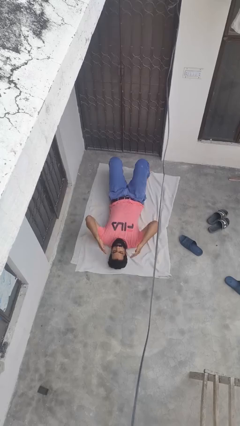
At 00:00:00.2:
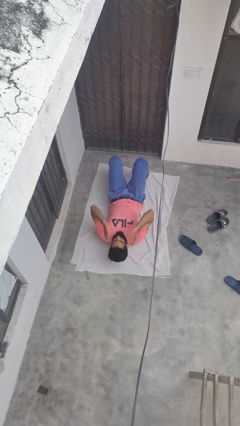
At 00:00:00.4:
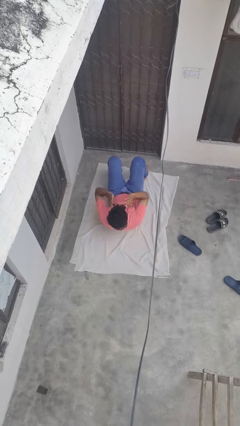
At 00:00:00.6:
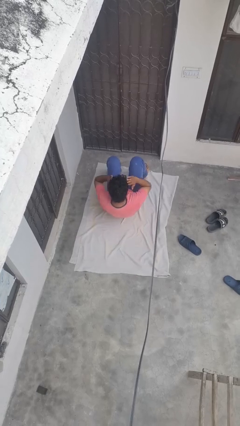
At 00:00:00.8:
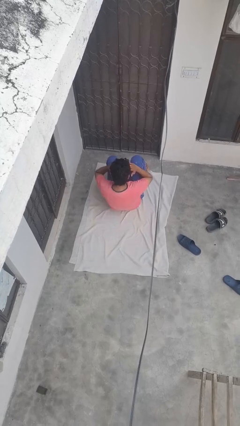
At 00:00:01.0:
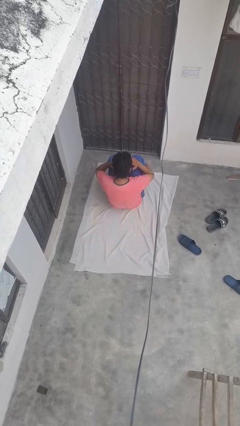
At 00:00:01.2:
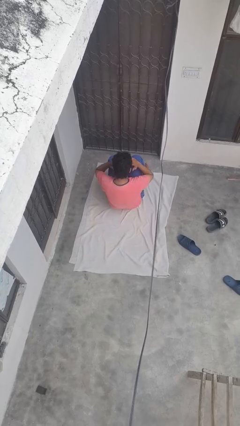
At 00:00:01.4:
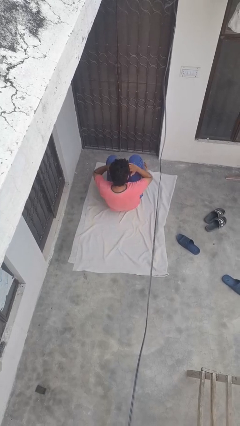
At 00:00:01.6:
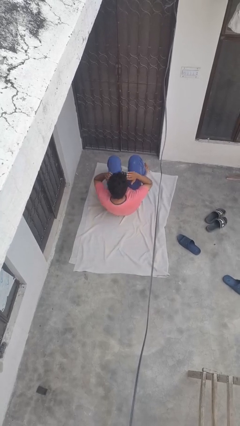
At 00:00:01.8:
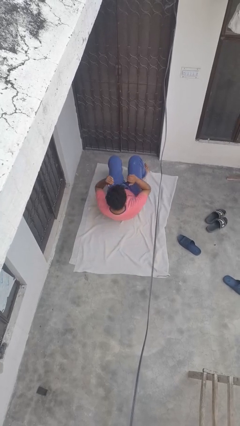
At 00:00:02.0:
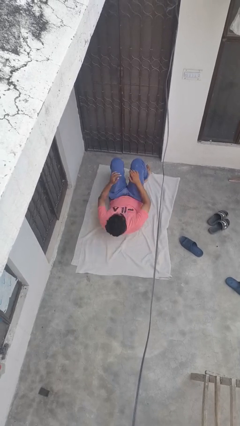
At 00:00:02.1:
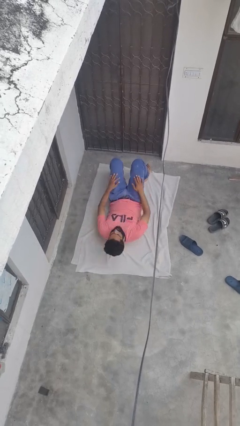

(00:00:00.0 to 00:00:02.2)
person exercises with situp

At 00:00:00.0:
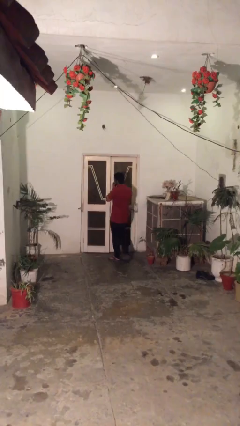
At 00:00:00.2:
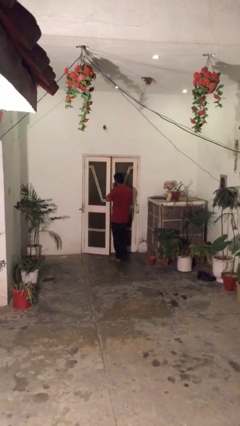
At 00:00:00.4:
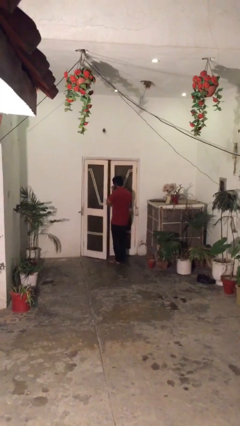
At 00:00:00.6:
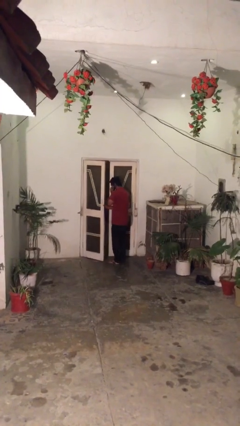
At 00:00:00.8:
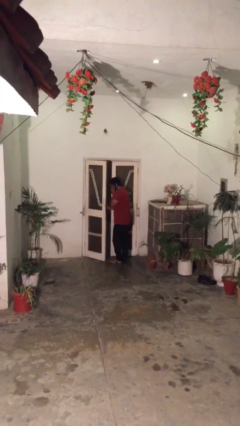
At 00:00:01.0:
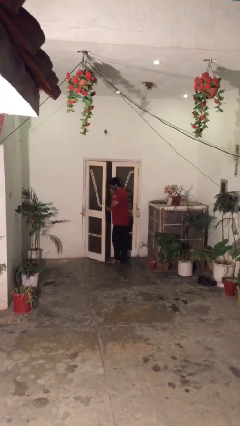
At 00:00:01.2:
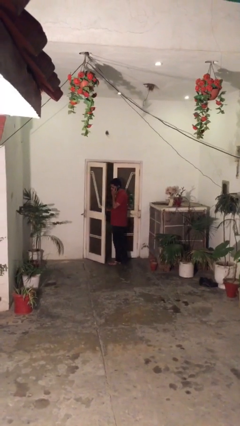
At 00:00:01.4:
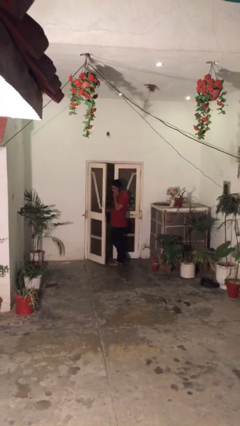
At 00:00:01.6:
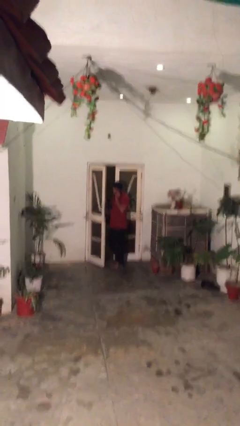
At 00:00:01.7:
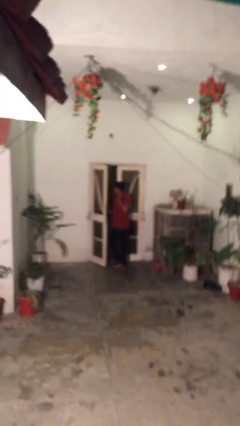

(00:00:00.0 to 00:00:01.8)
person opens facility door

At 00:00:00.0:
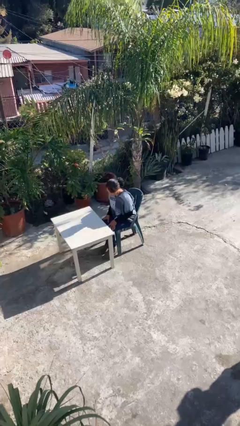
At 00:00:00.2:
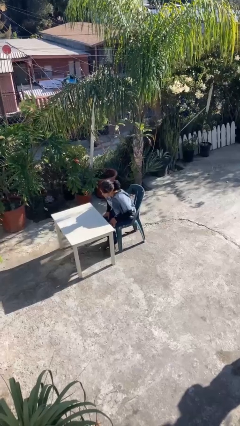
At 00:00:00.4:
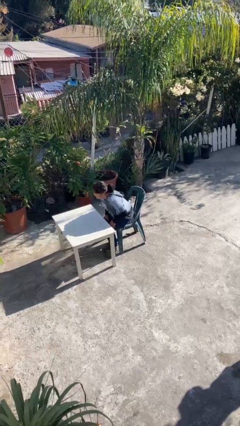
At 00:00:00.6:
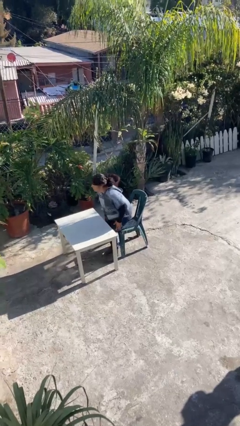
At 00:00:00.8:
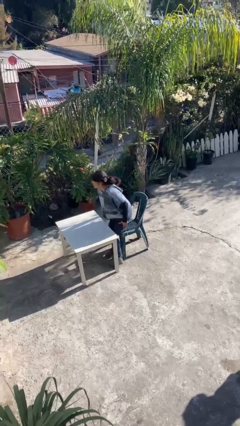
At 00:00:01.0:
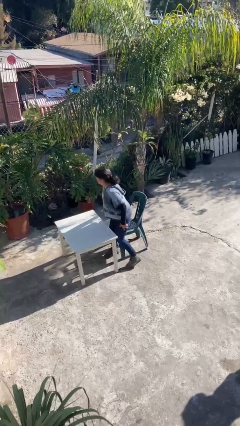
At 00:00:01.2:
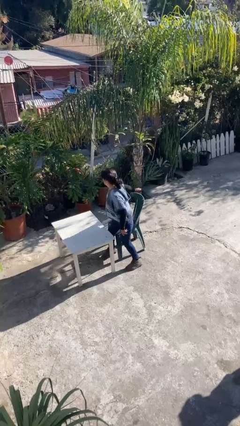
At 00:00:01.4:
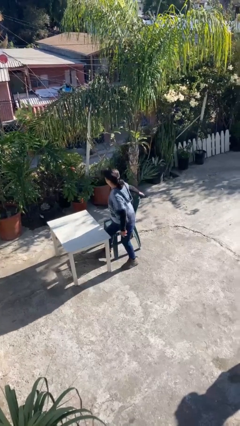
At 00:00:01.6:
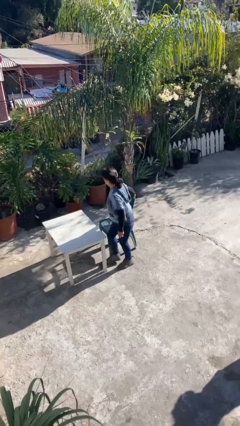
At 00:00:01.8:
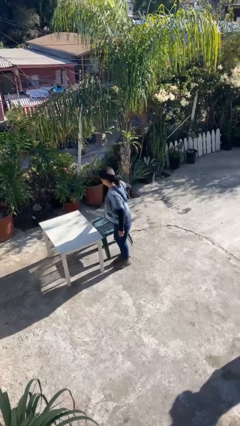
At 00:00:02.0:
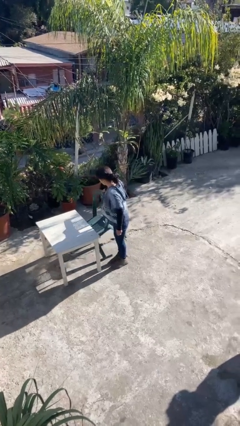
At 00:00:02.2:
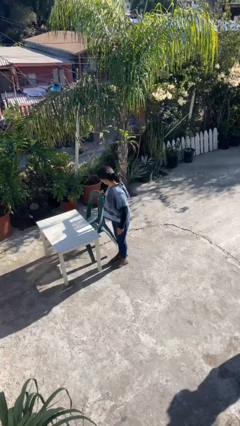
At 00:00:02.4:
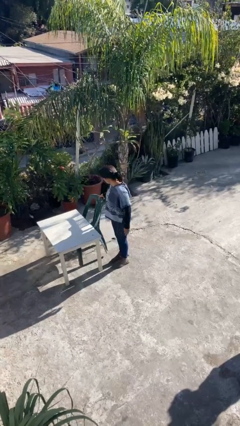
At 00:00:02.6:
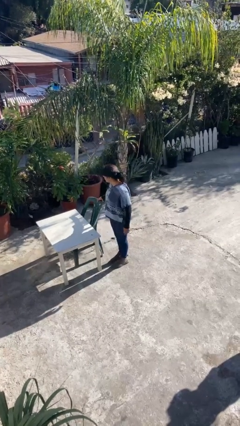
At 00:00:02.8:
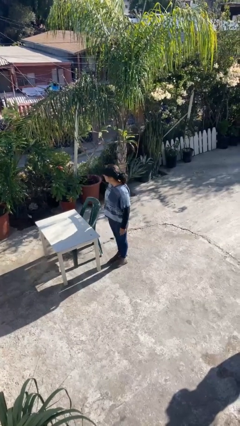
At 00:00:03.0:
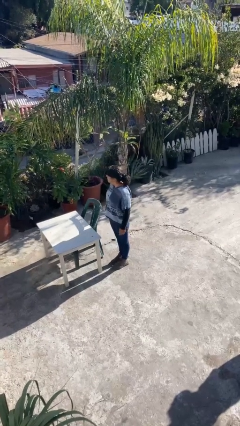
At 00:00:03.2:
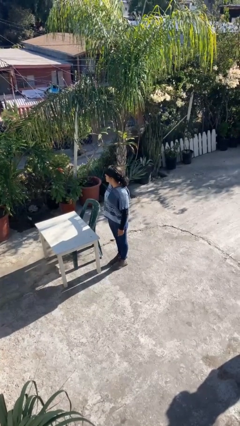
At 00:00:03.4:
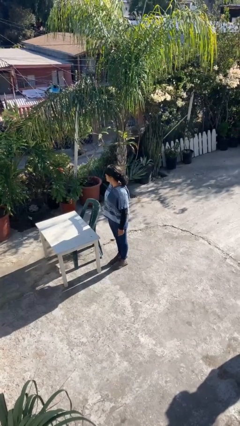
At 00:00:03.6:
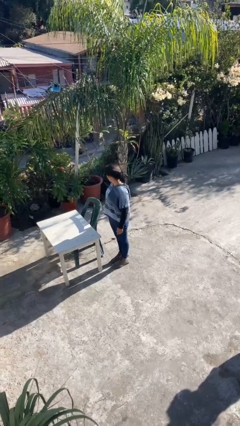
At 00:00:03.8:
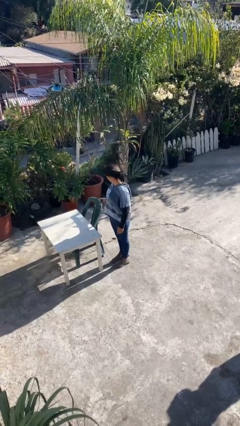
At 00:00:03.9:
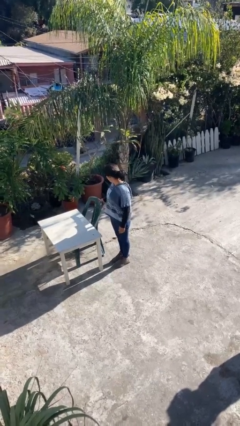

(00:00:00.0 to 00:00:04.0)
person stands up

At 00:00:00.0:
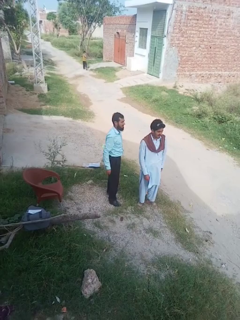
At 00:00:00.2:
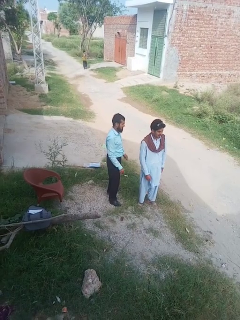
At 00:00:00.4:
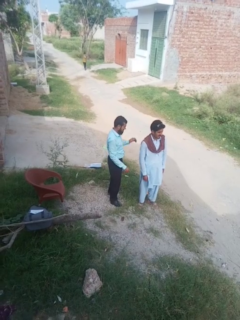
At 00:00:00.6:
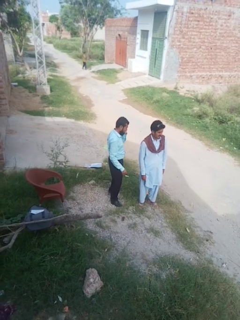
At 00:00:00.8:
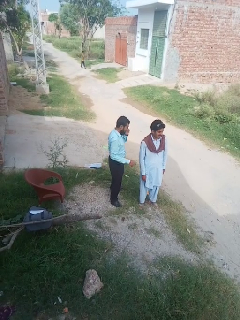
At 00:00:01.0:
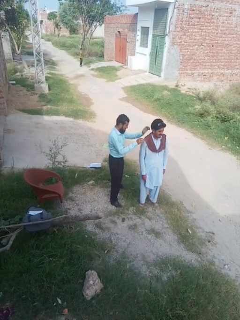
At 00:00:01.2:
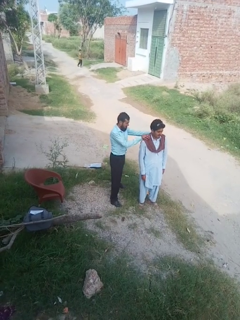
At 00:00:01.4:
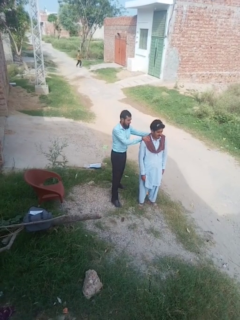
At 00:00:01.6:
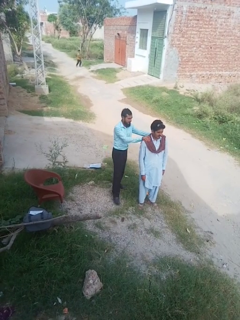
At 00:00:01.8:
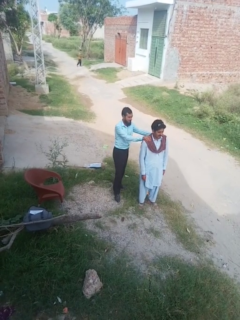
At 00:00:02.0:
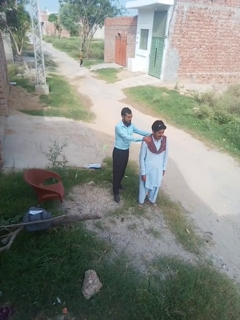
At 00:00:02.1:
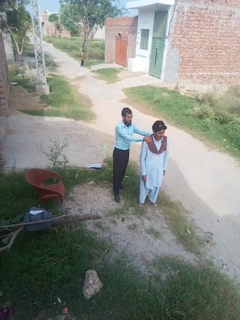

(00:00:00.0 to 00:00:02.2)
person grabs person by shoulder

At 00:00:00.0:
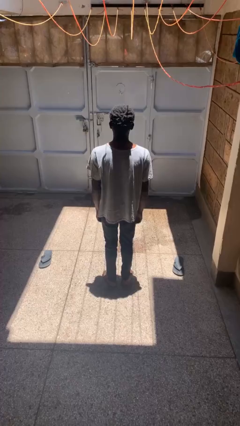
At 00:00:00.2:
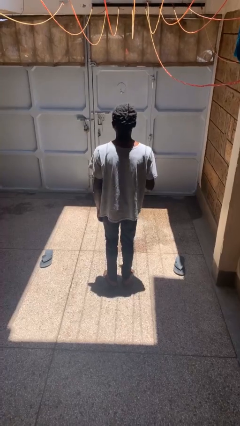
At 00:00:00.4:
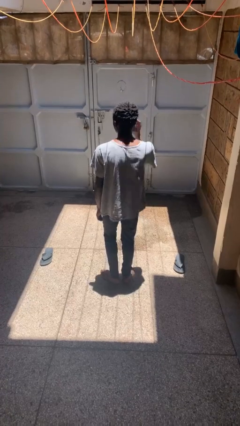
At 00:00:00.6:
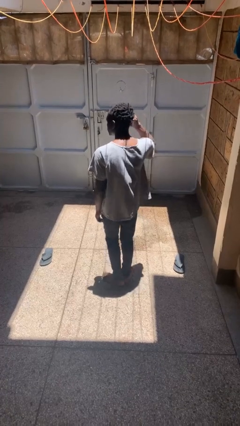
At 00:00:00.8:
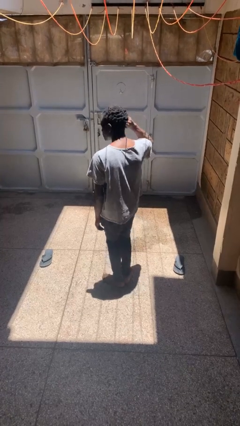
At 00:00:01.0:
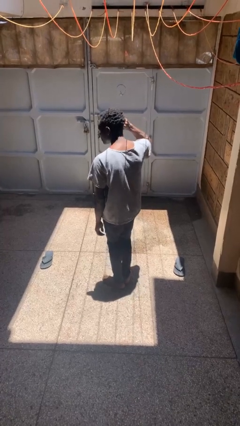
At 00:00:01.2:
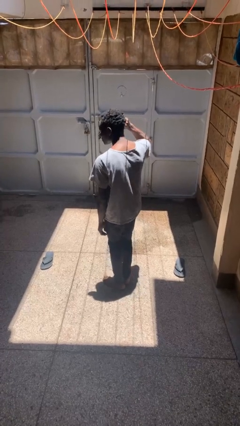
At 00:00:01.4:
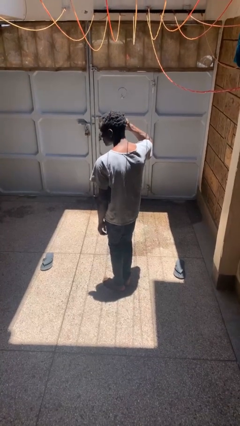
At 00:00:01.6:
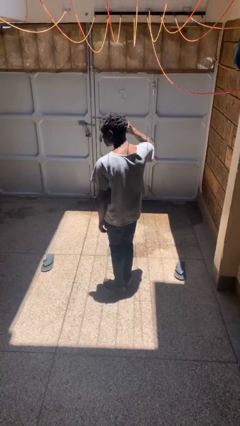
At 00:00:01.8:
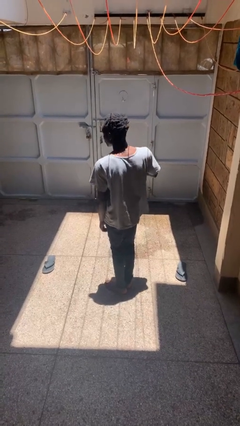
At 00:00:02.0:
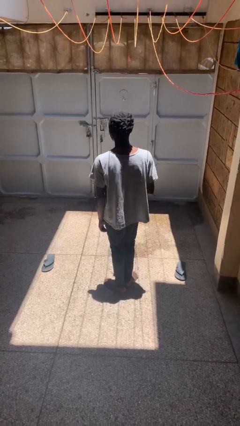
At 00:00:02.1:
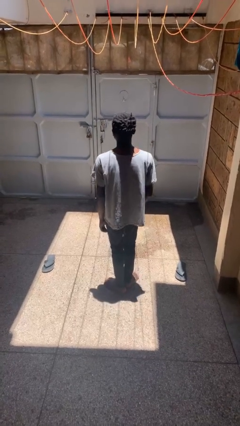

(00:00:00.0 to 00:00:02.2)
person touches earlobe

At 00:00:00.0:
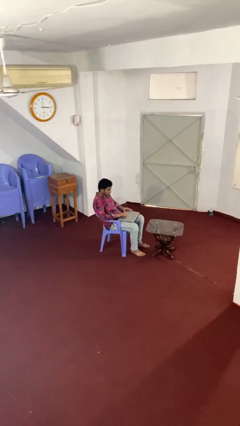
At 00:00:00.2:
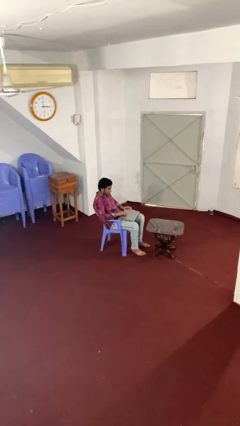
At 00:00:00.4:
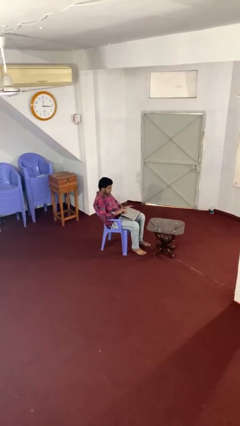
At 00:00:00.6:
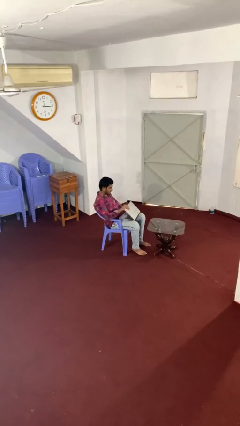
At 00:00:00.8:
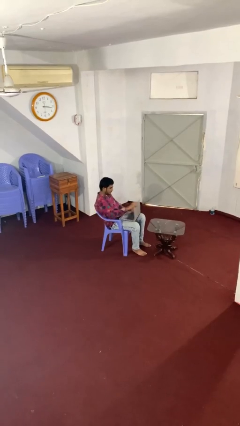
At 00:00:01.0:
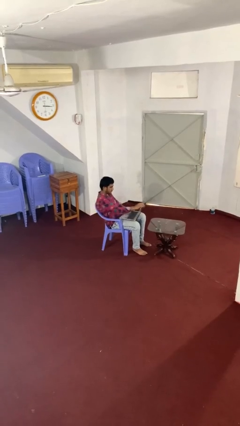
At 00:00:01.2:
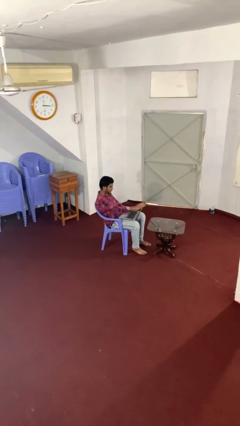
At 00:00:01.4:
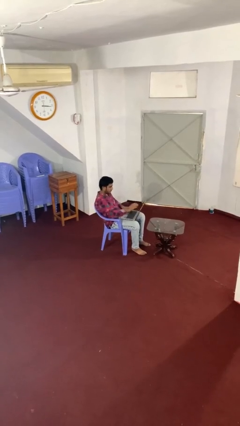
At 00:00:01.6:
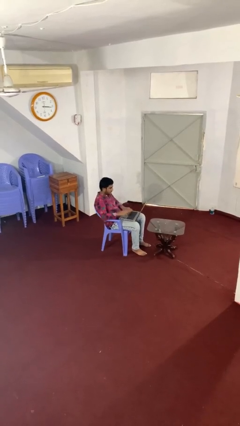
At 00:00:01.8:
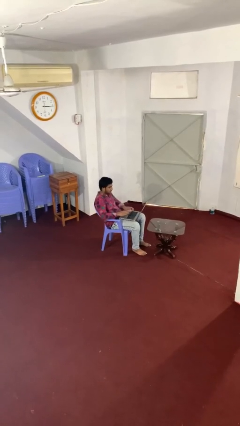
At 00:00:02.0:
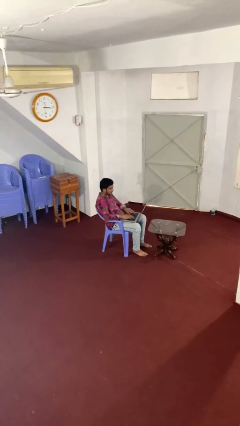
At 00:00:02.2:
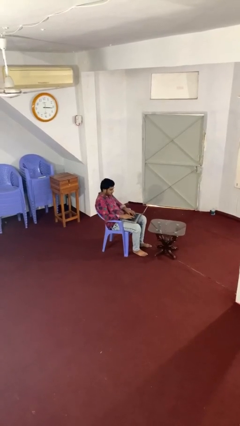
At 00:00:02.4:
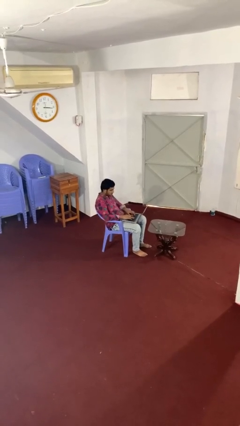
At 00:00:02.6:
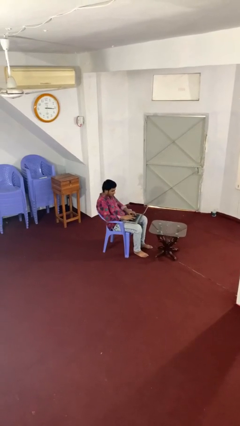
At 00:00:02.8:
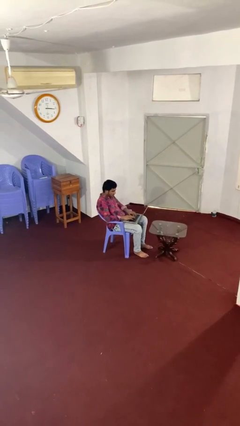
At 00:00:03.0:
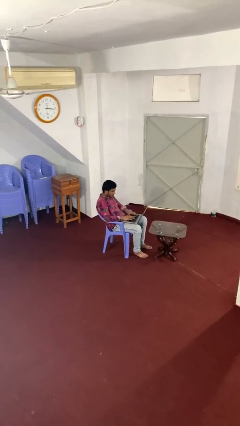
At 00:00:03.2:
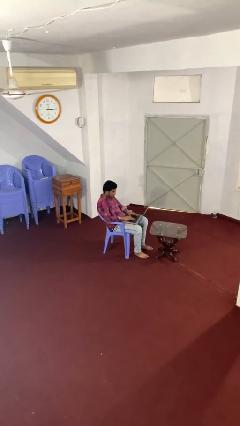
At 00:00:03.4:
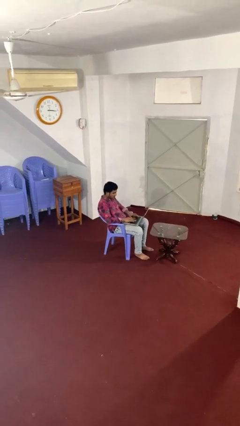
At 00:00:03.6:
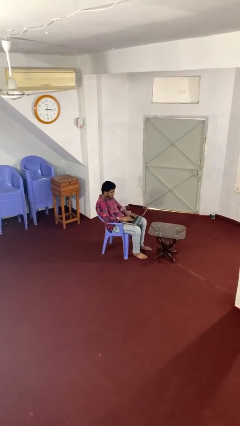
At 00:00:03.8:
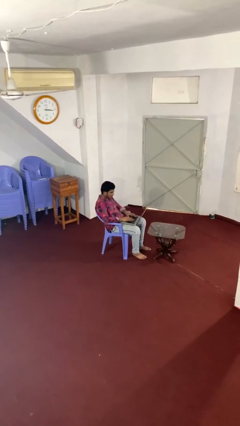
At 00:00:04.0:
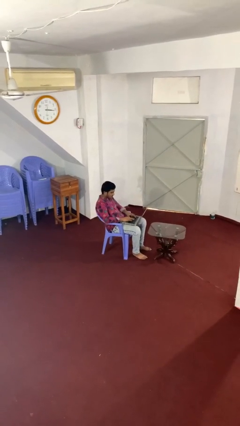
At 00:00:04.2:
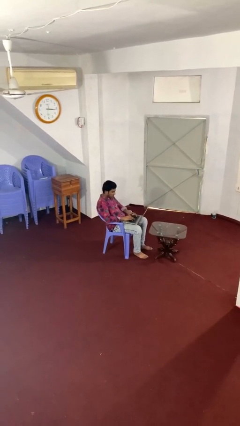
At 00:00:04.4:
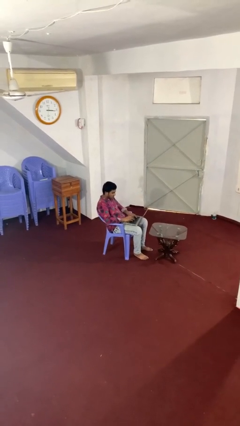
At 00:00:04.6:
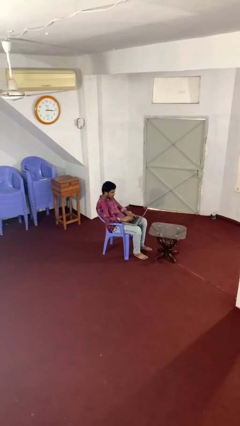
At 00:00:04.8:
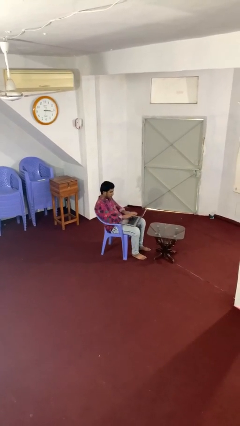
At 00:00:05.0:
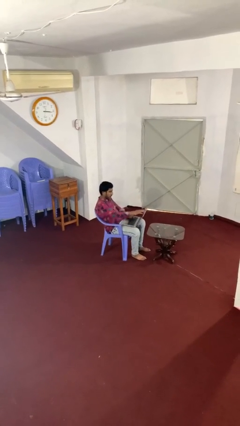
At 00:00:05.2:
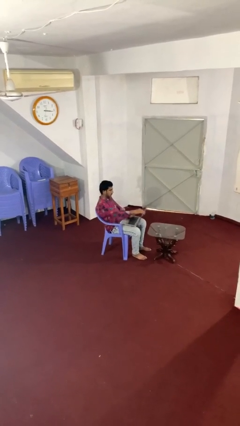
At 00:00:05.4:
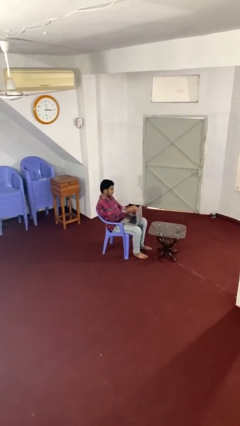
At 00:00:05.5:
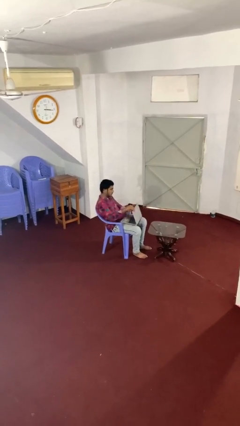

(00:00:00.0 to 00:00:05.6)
person interacts with laptop
